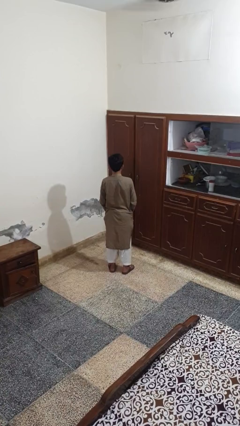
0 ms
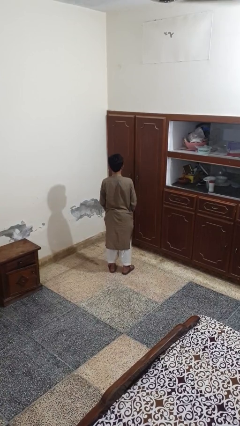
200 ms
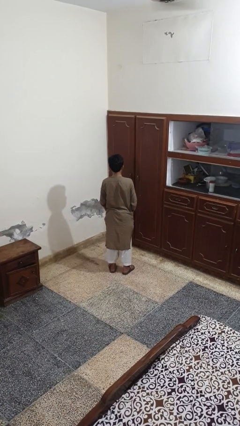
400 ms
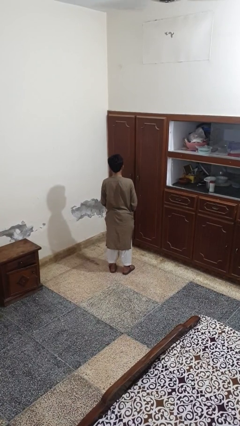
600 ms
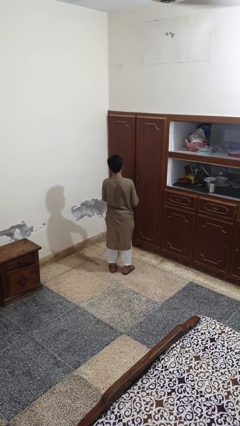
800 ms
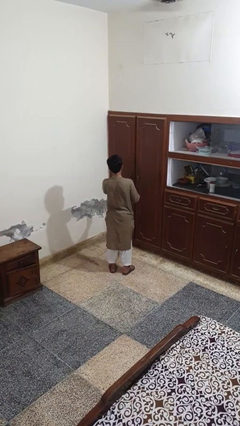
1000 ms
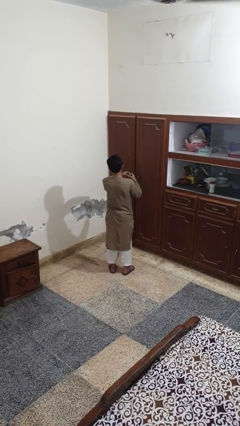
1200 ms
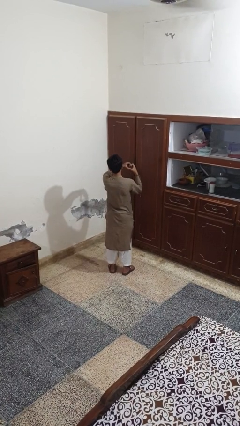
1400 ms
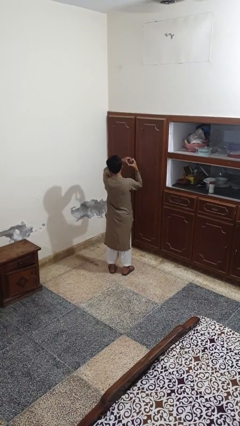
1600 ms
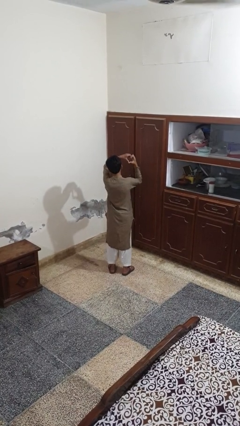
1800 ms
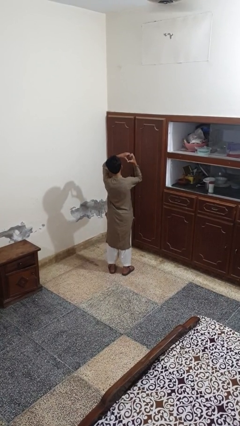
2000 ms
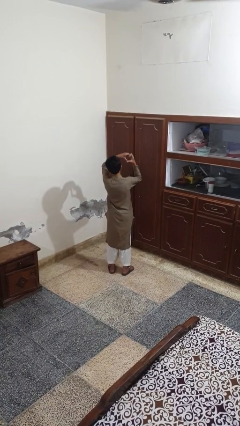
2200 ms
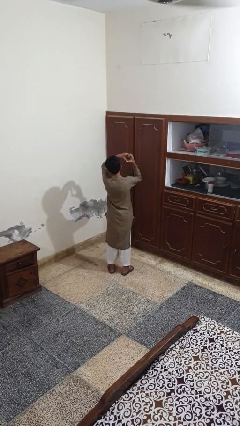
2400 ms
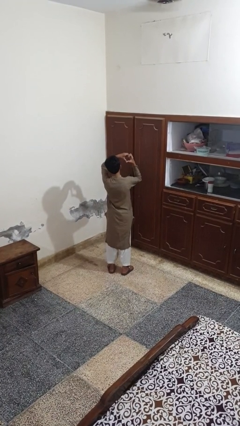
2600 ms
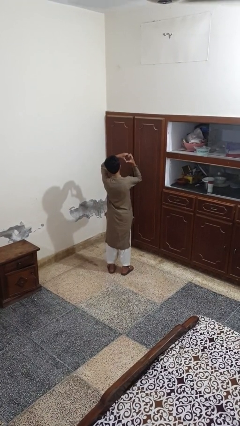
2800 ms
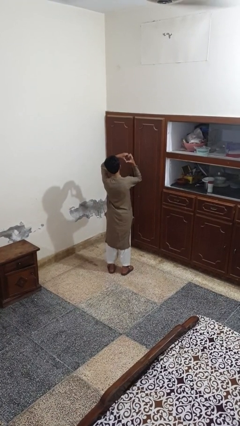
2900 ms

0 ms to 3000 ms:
person gestures heart

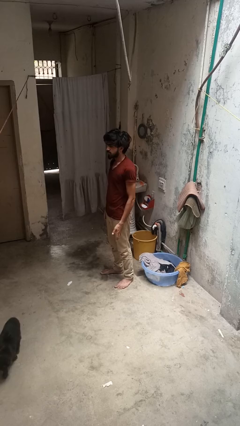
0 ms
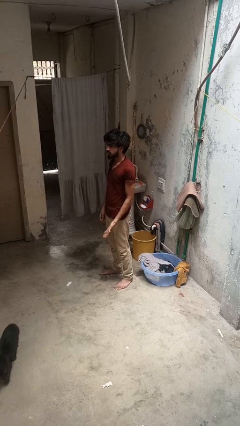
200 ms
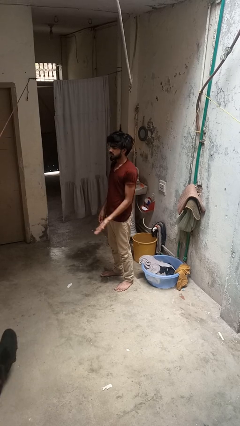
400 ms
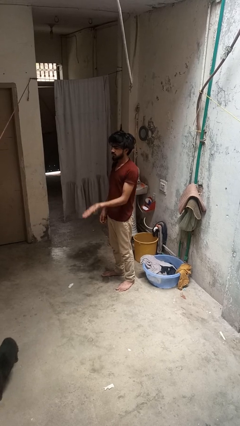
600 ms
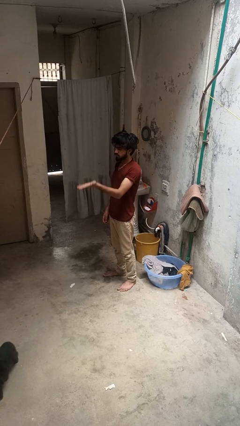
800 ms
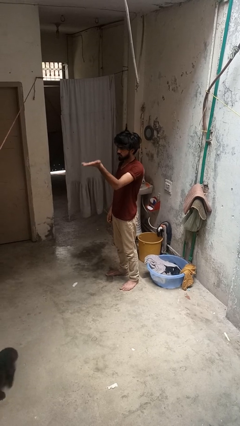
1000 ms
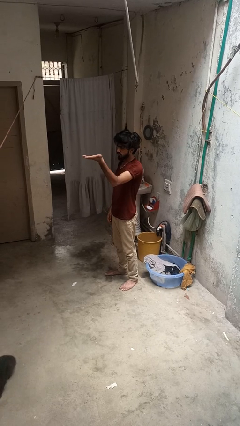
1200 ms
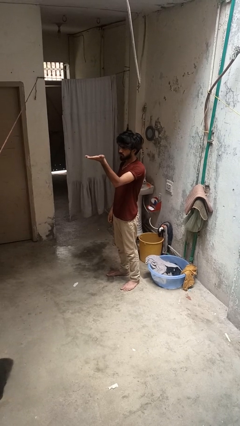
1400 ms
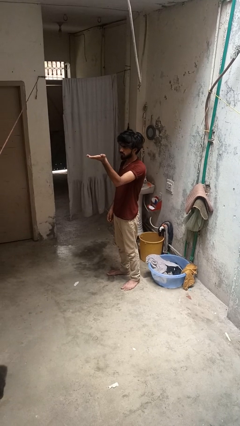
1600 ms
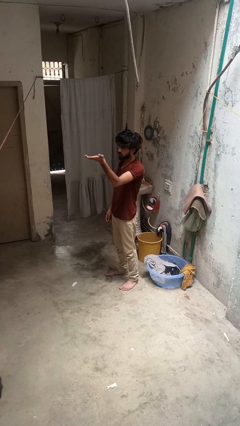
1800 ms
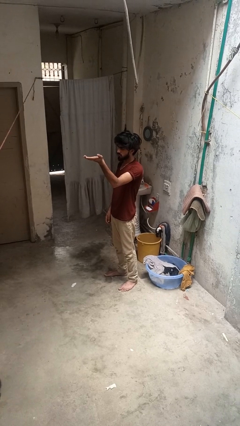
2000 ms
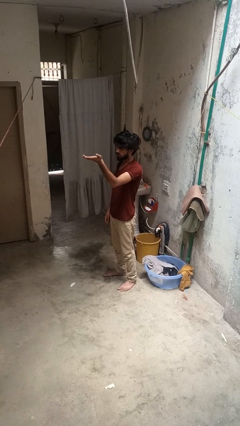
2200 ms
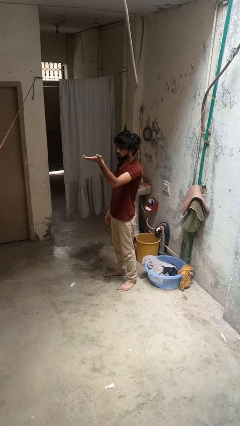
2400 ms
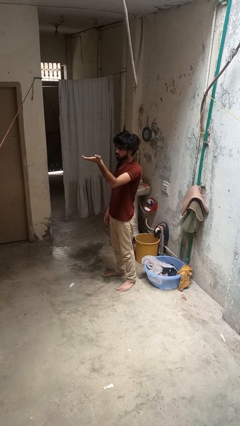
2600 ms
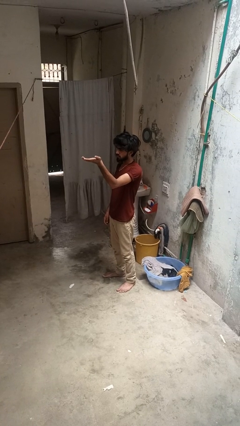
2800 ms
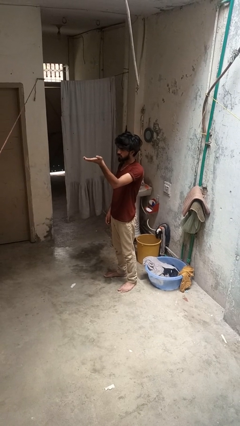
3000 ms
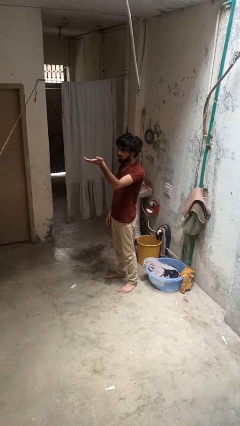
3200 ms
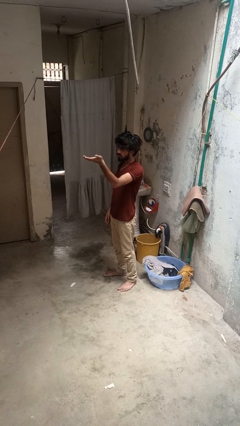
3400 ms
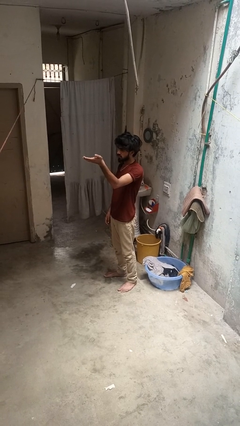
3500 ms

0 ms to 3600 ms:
person gestures swipe up

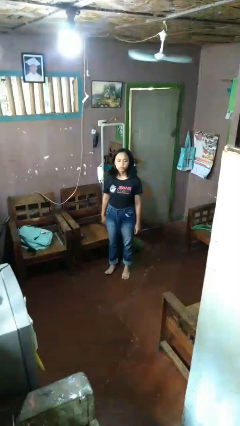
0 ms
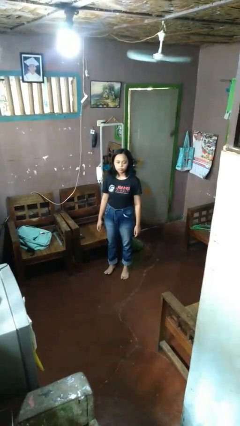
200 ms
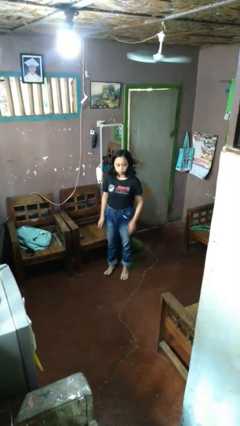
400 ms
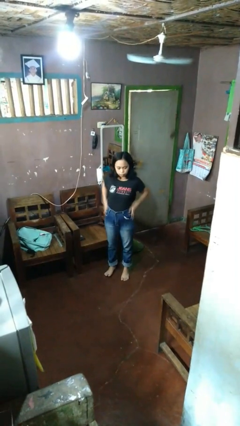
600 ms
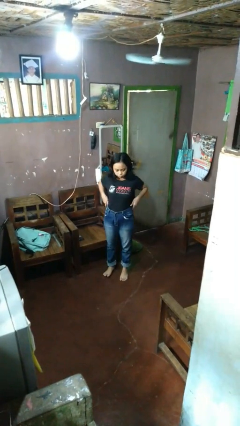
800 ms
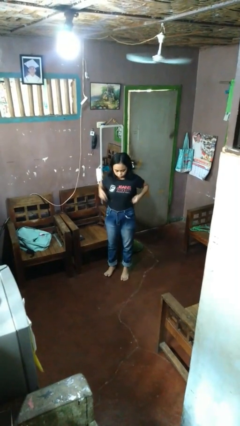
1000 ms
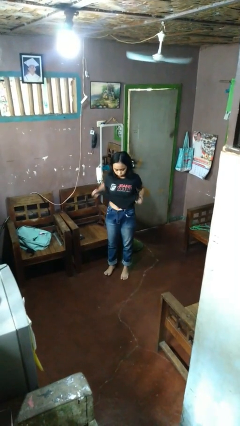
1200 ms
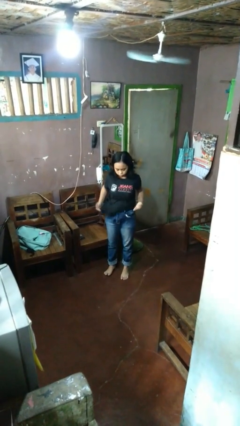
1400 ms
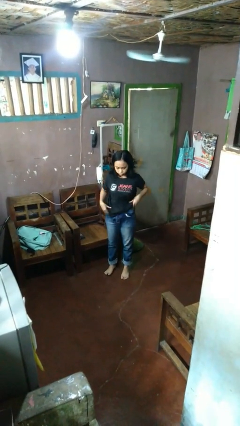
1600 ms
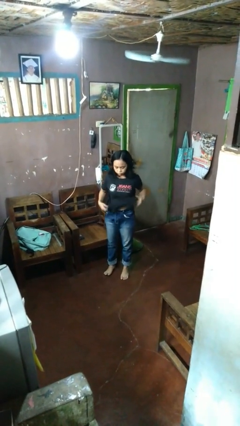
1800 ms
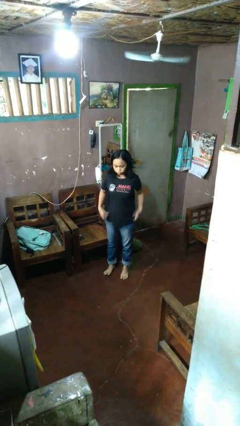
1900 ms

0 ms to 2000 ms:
person untucks shirt

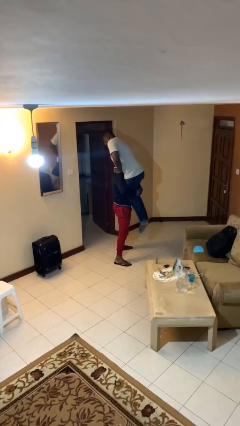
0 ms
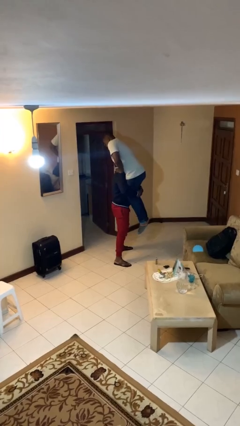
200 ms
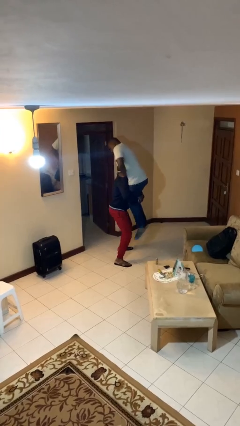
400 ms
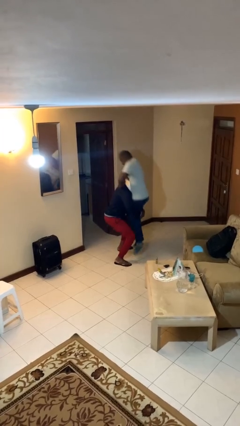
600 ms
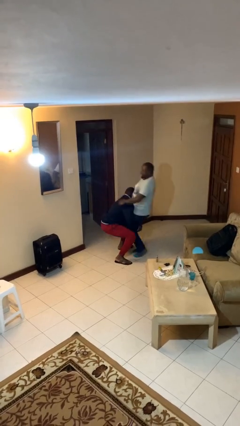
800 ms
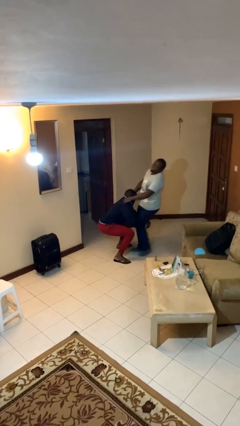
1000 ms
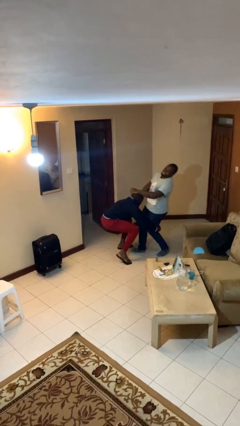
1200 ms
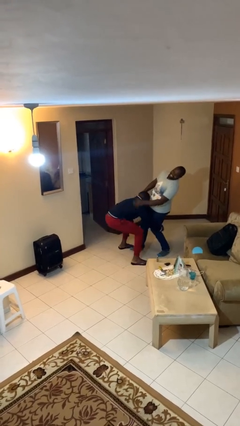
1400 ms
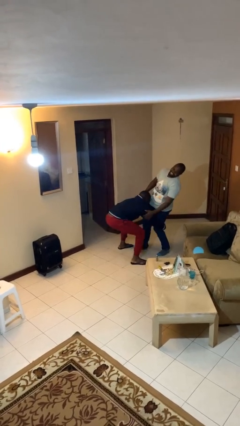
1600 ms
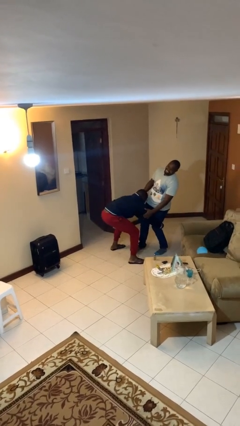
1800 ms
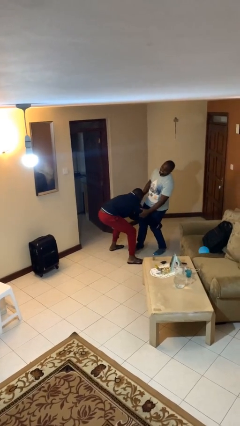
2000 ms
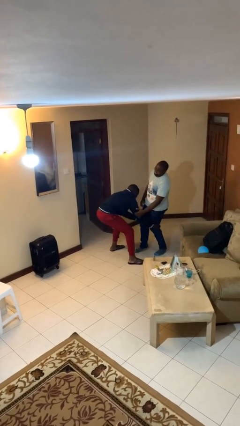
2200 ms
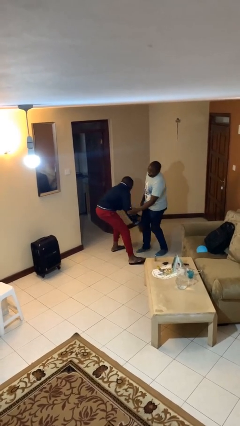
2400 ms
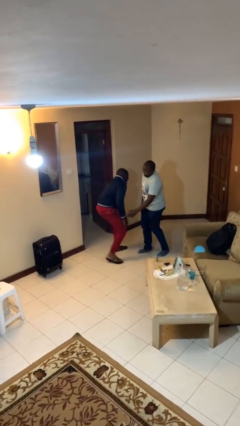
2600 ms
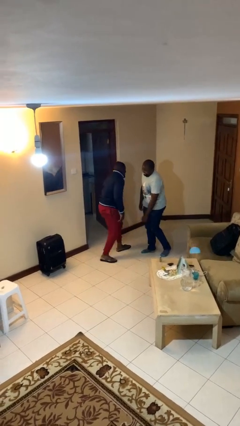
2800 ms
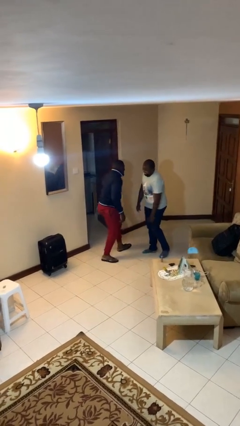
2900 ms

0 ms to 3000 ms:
person puts down person

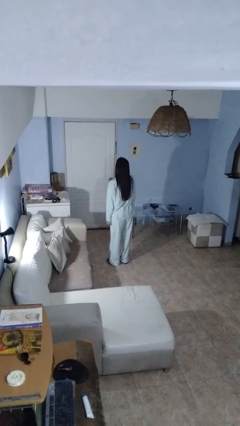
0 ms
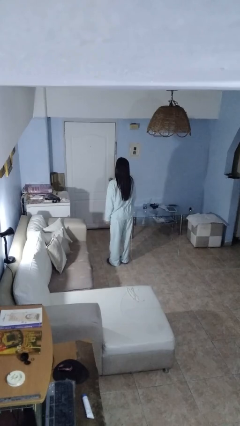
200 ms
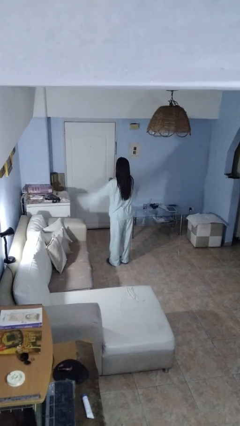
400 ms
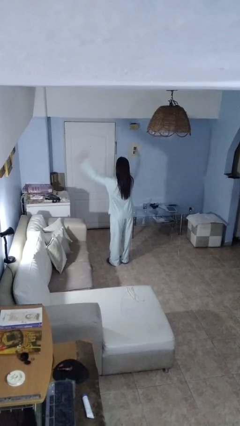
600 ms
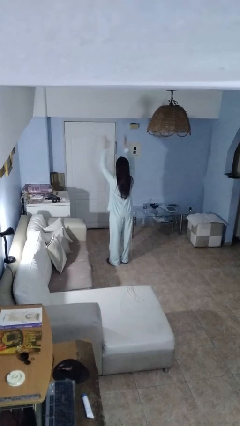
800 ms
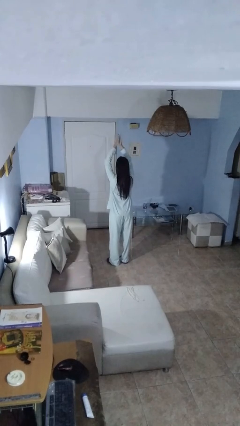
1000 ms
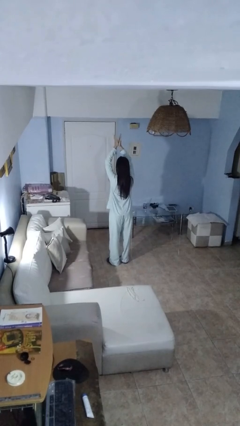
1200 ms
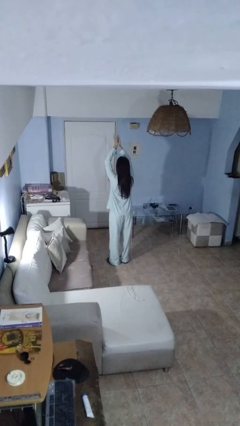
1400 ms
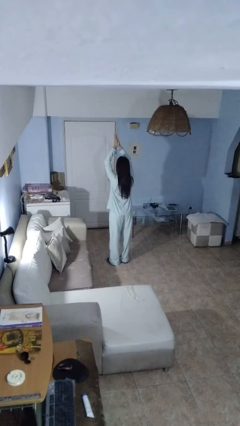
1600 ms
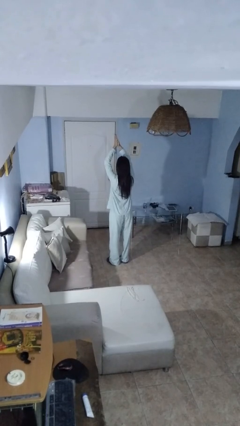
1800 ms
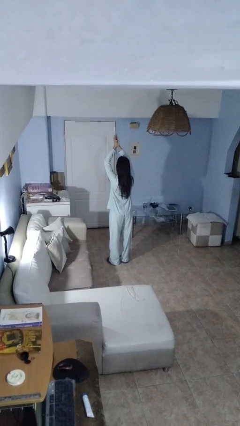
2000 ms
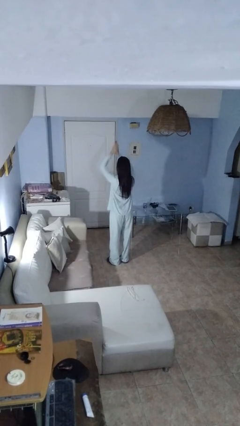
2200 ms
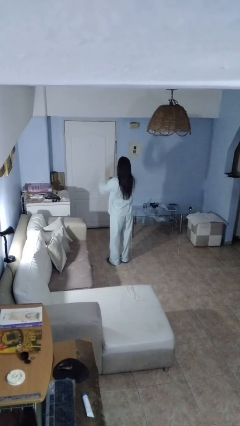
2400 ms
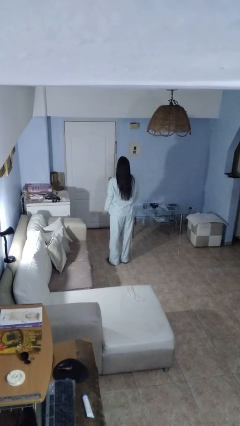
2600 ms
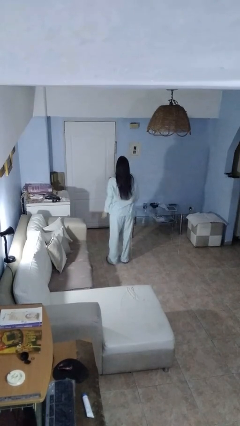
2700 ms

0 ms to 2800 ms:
person claps hands

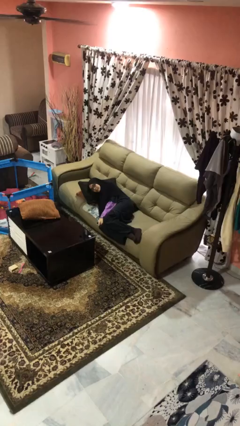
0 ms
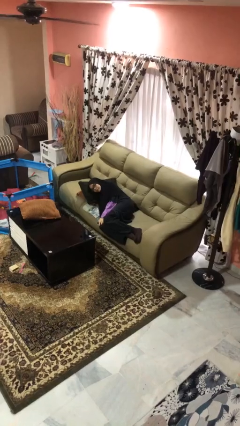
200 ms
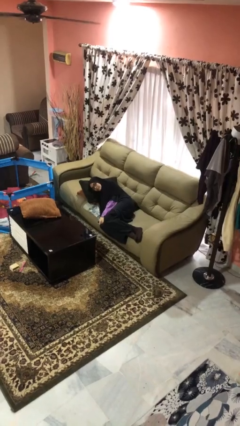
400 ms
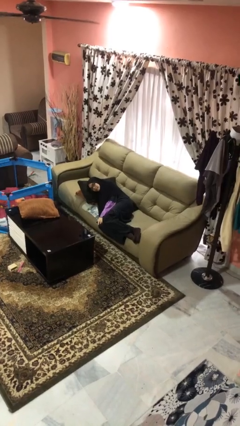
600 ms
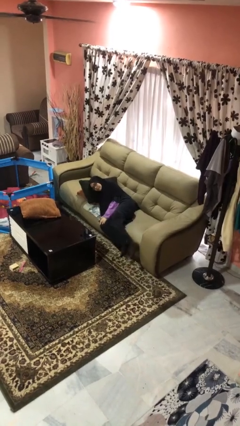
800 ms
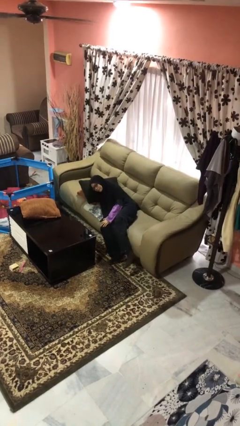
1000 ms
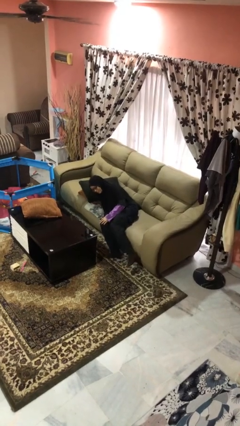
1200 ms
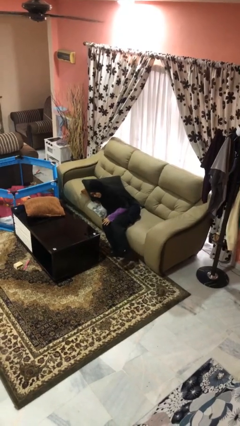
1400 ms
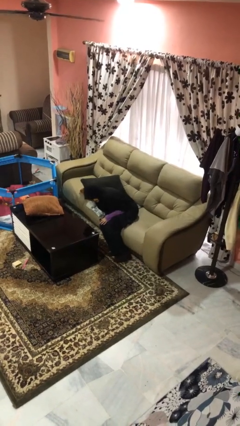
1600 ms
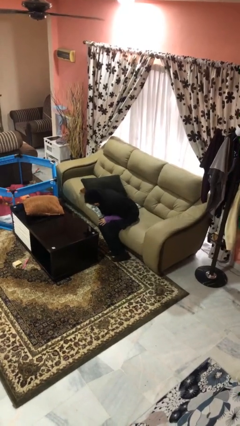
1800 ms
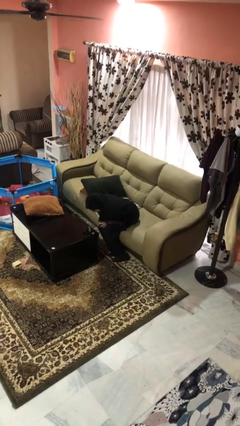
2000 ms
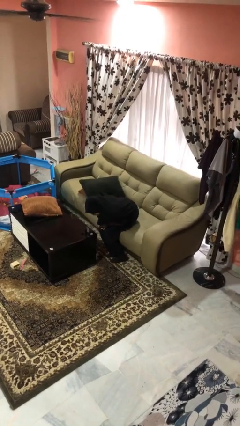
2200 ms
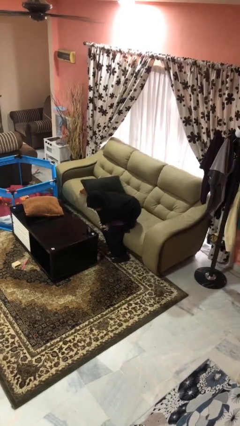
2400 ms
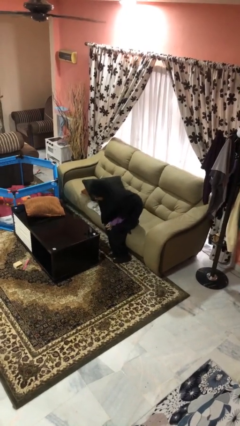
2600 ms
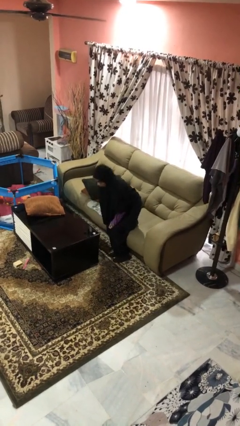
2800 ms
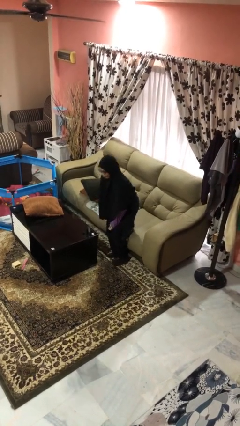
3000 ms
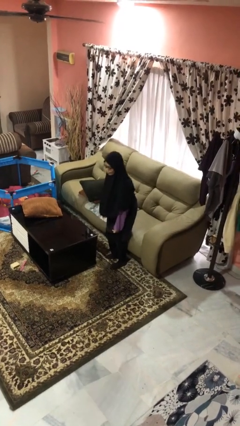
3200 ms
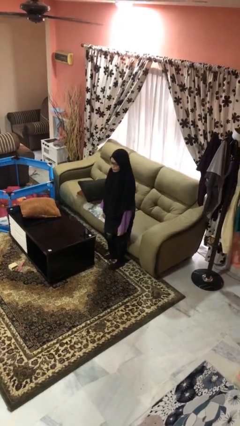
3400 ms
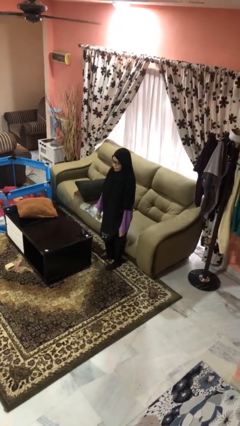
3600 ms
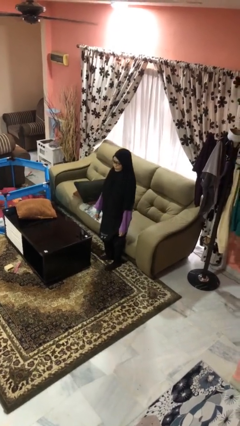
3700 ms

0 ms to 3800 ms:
person stands up
